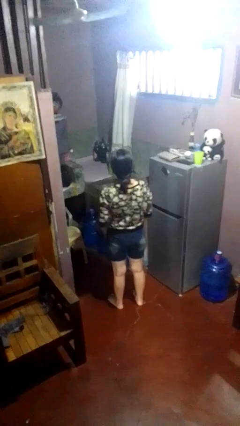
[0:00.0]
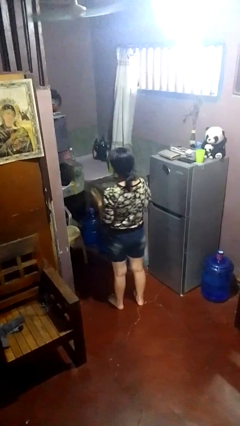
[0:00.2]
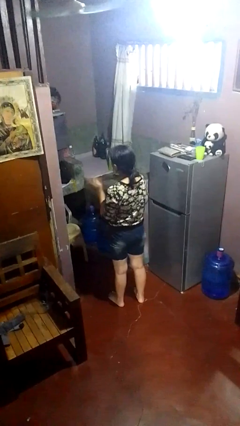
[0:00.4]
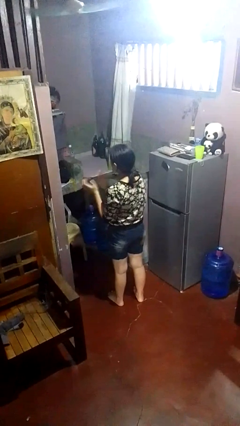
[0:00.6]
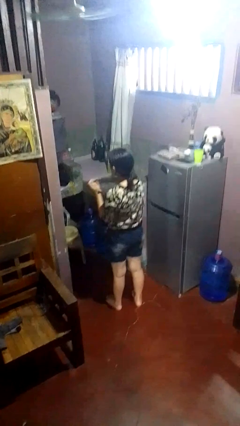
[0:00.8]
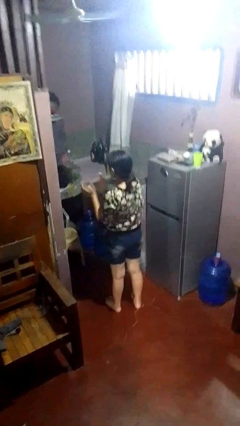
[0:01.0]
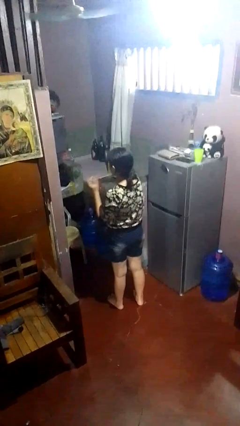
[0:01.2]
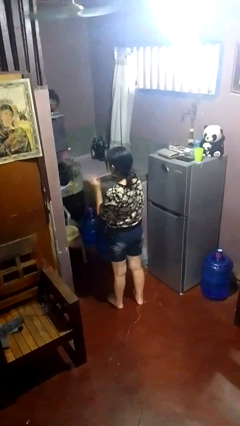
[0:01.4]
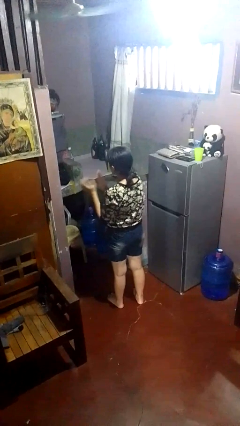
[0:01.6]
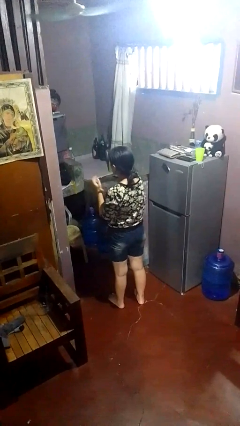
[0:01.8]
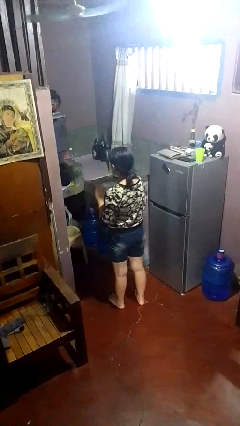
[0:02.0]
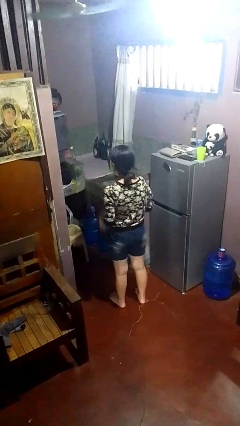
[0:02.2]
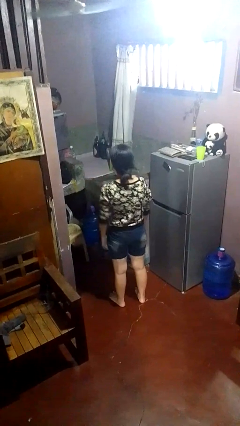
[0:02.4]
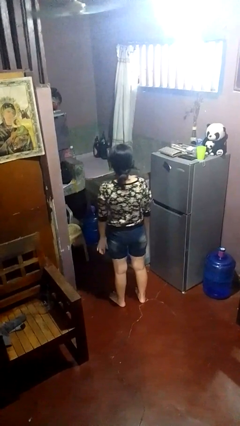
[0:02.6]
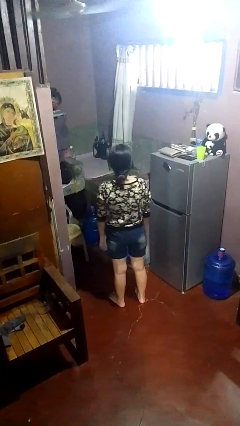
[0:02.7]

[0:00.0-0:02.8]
person claps hands

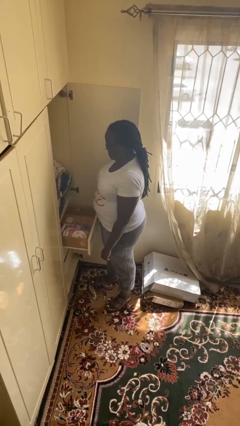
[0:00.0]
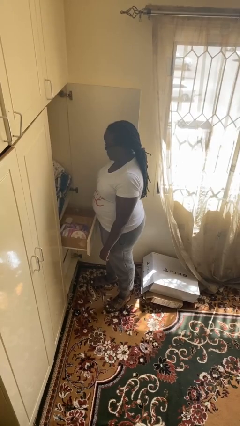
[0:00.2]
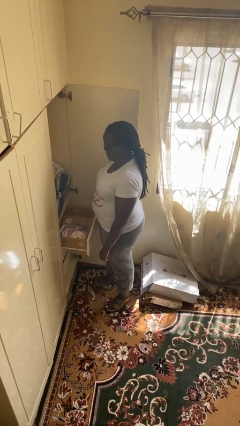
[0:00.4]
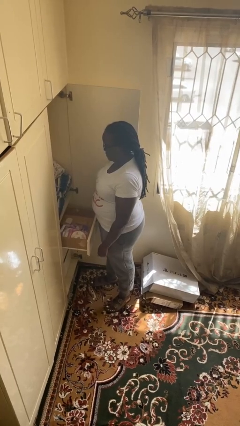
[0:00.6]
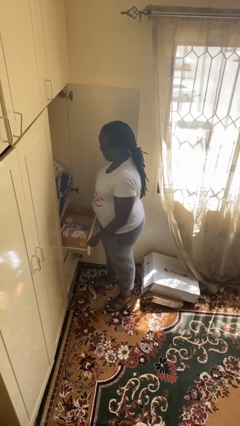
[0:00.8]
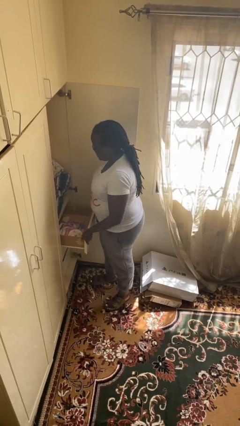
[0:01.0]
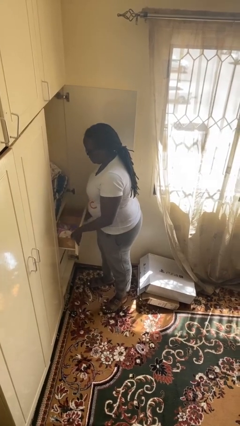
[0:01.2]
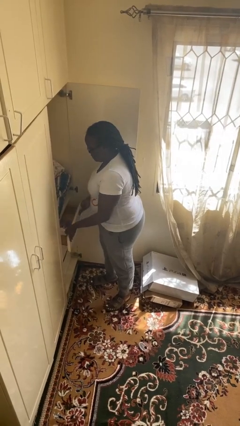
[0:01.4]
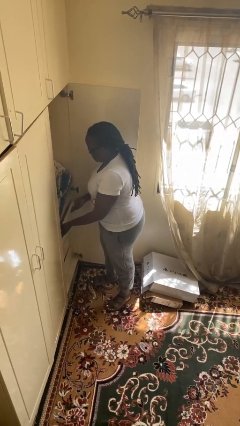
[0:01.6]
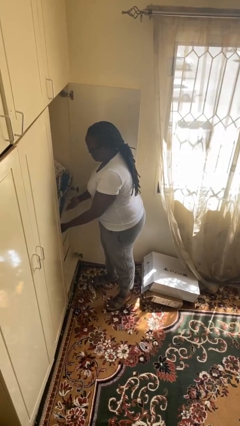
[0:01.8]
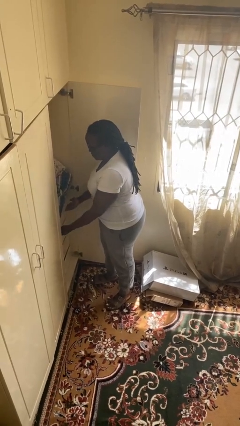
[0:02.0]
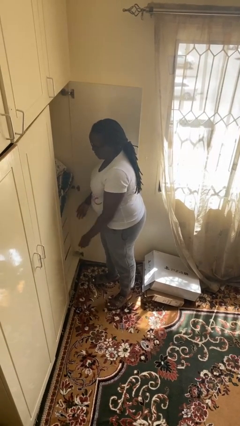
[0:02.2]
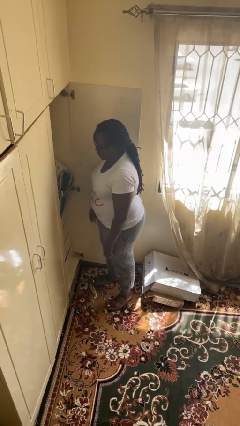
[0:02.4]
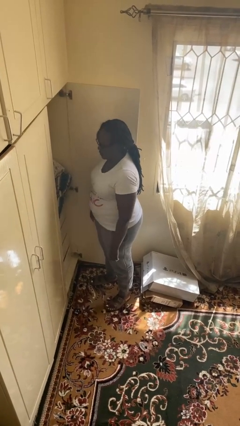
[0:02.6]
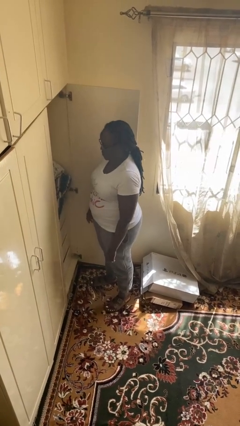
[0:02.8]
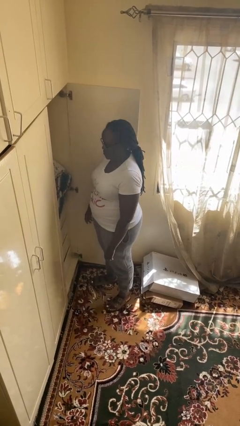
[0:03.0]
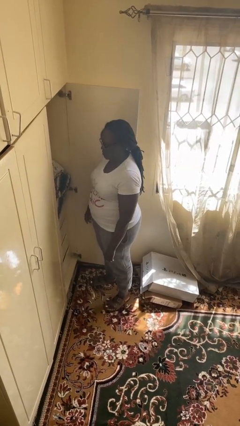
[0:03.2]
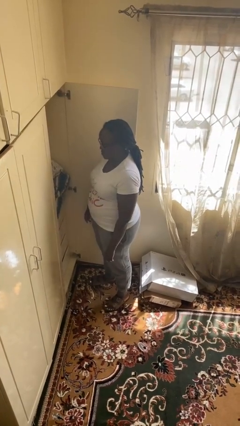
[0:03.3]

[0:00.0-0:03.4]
person closes dresser drawer

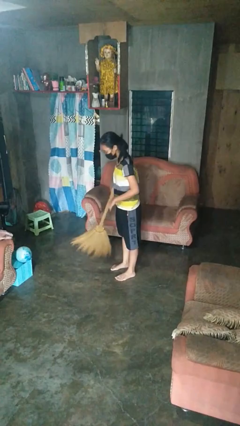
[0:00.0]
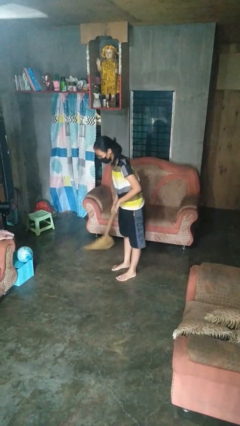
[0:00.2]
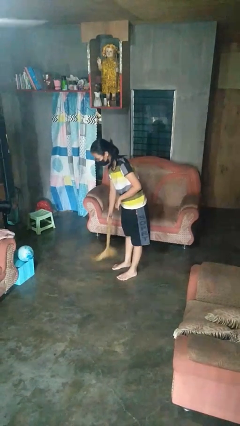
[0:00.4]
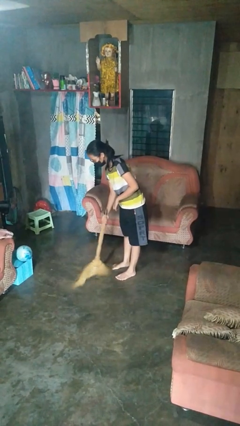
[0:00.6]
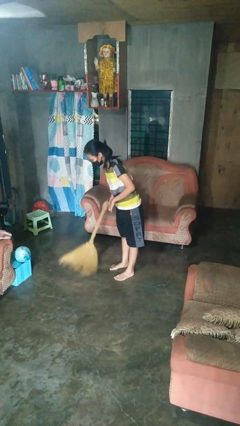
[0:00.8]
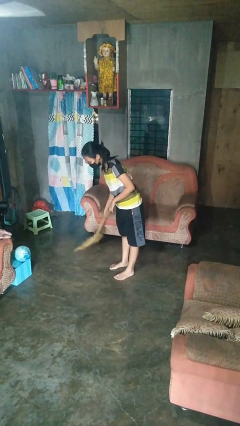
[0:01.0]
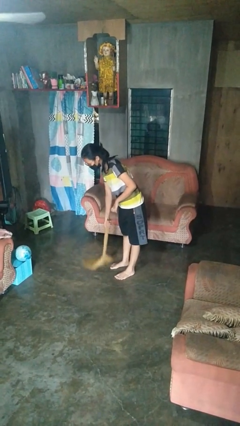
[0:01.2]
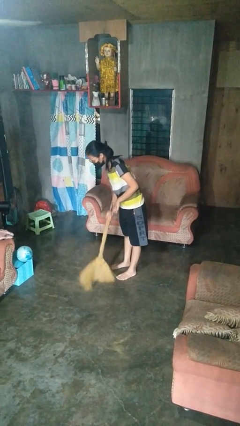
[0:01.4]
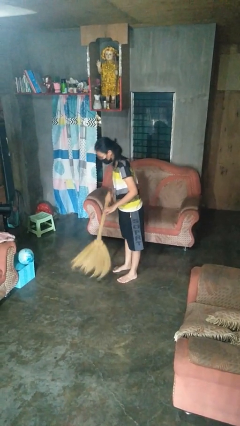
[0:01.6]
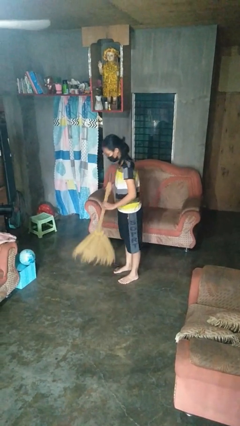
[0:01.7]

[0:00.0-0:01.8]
person sweeps floor

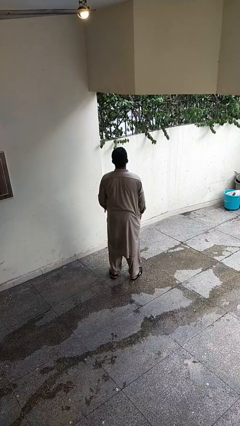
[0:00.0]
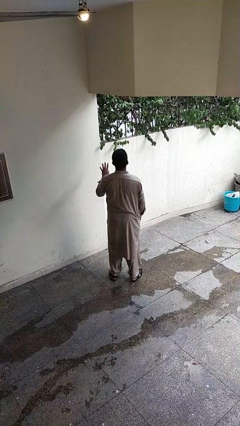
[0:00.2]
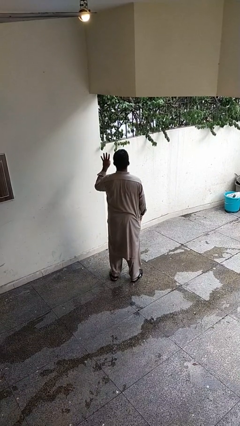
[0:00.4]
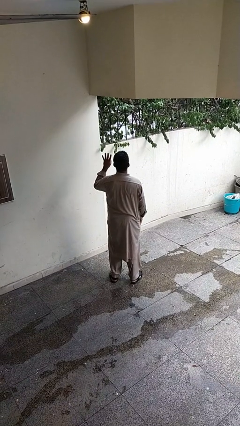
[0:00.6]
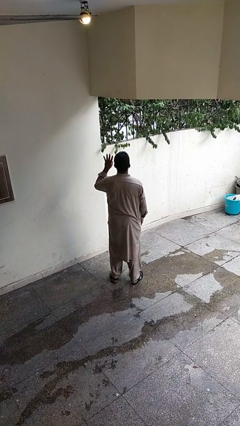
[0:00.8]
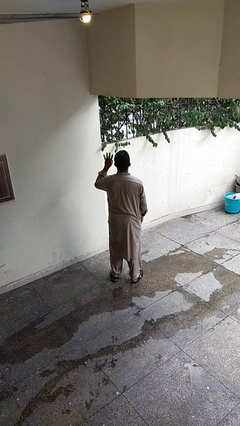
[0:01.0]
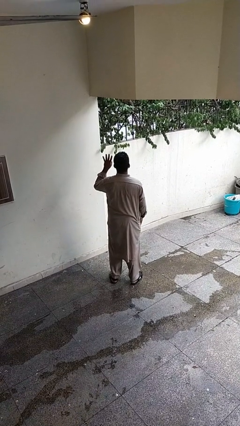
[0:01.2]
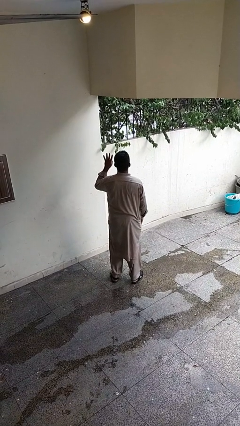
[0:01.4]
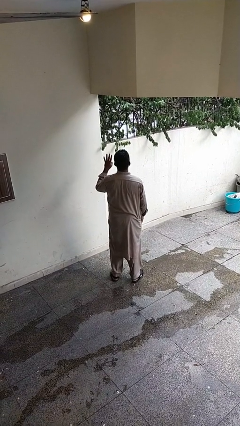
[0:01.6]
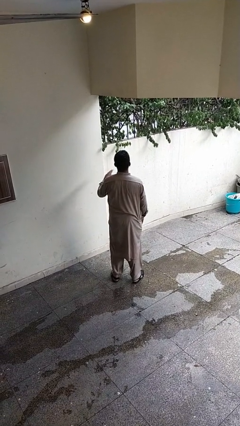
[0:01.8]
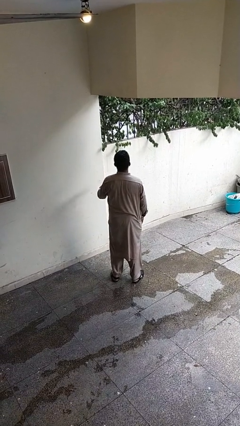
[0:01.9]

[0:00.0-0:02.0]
person gestures number four

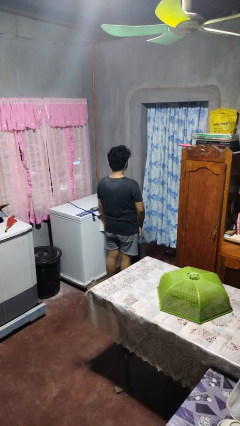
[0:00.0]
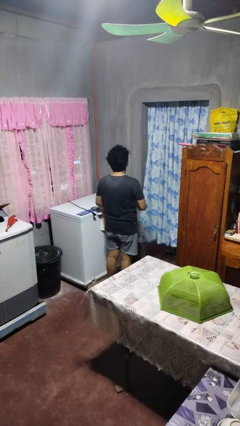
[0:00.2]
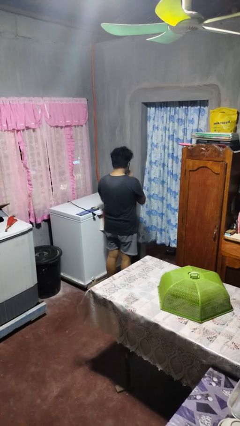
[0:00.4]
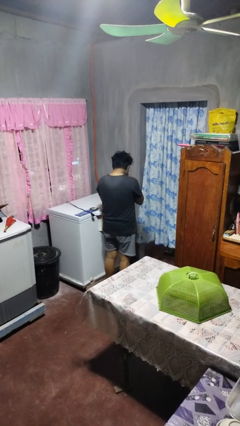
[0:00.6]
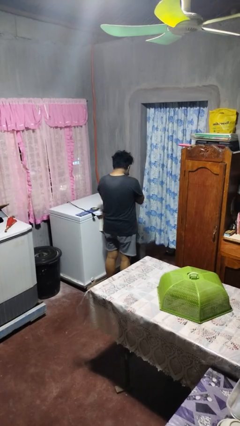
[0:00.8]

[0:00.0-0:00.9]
person sneezes into hand

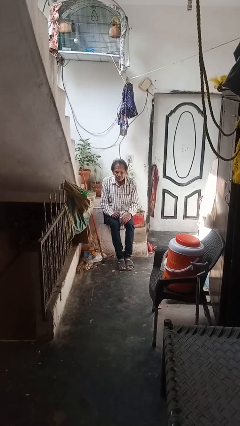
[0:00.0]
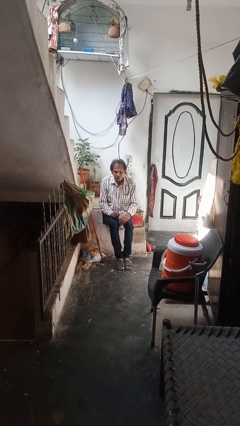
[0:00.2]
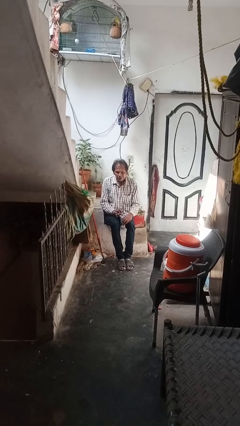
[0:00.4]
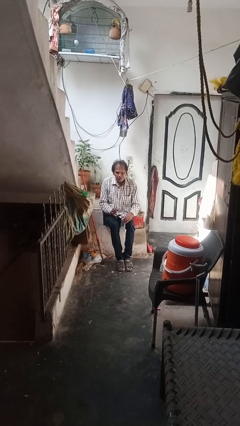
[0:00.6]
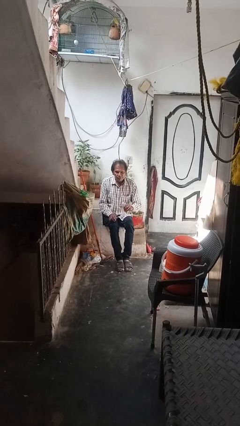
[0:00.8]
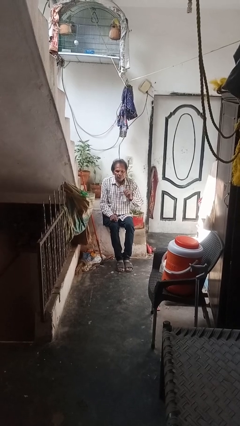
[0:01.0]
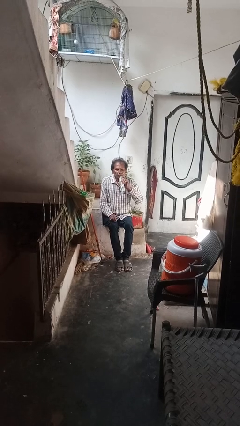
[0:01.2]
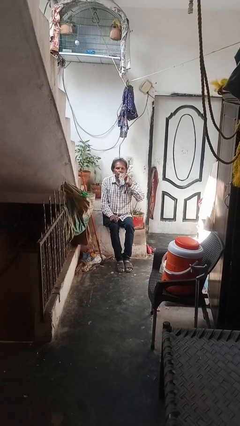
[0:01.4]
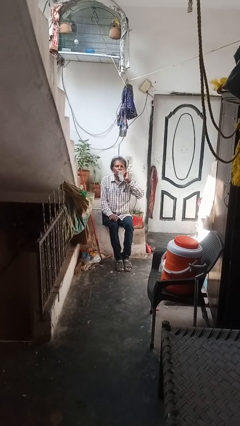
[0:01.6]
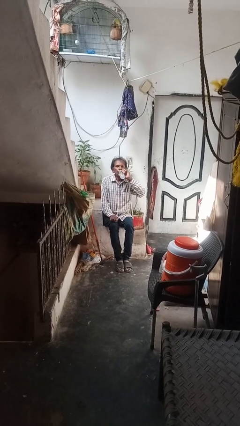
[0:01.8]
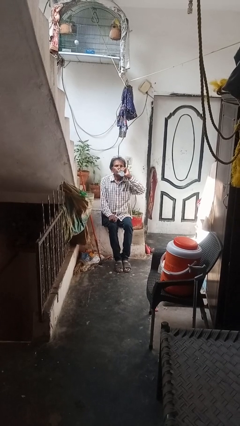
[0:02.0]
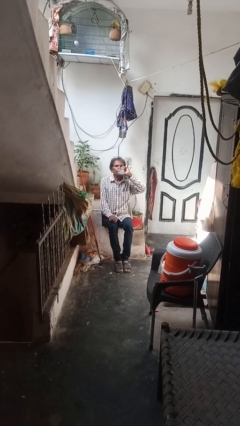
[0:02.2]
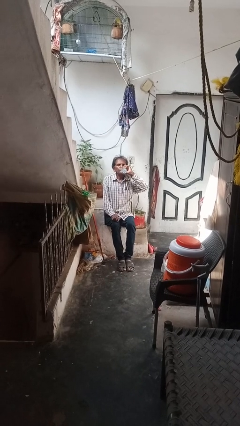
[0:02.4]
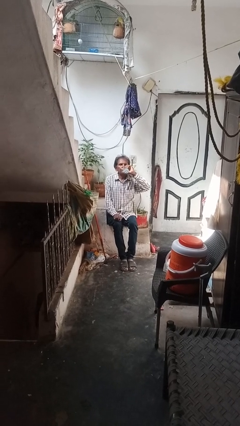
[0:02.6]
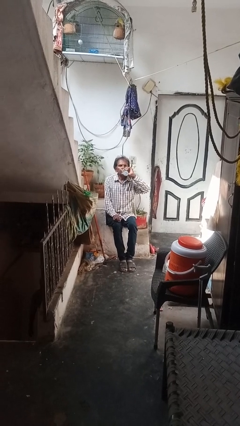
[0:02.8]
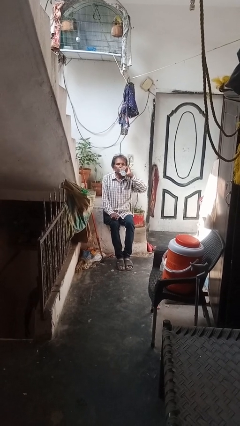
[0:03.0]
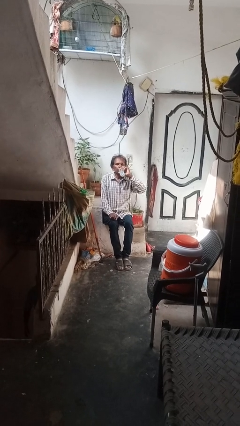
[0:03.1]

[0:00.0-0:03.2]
person drinks from bottle

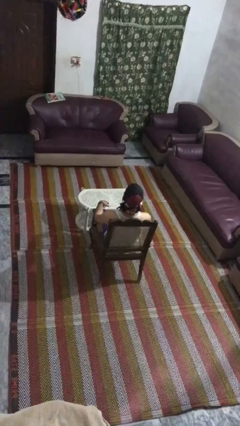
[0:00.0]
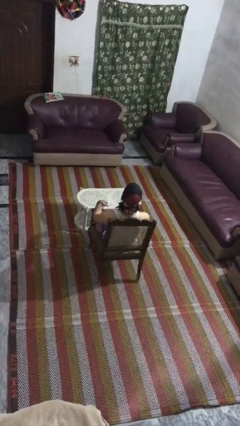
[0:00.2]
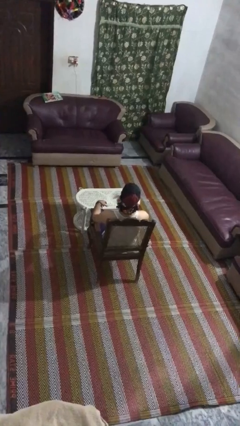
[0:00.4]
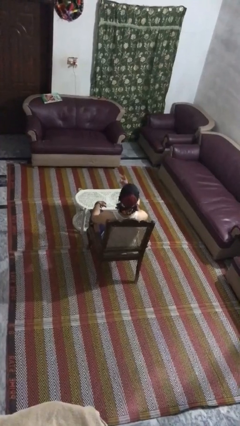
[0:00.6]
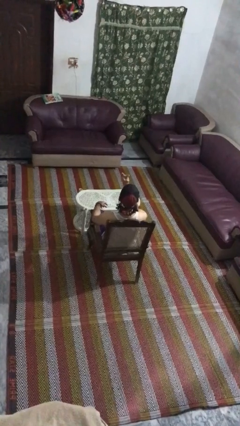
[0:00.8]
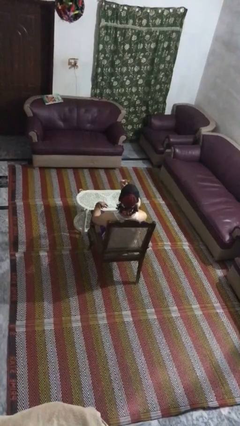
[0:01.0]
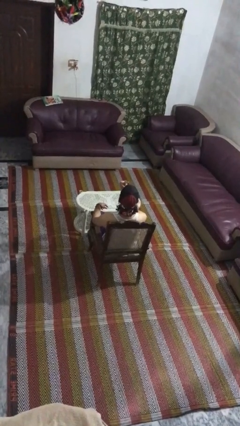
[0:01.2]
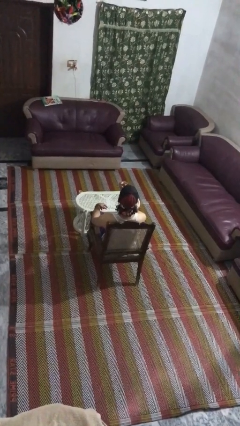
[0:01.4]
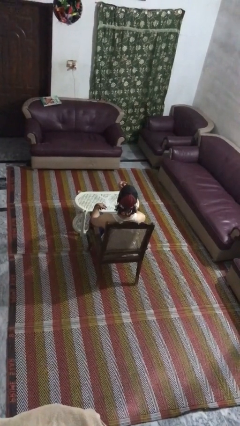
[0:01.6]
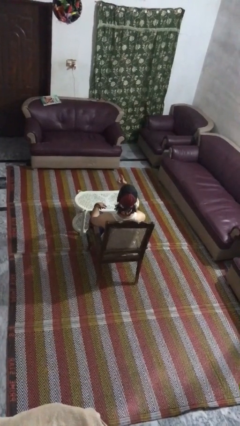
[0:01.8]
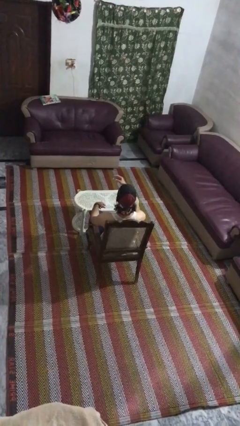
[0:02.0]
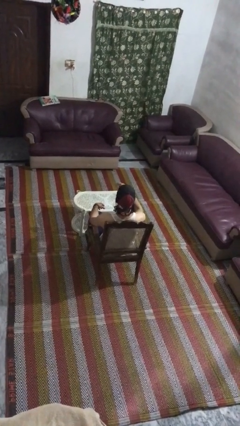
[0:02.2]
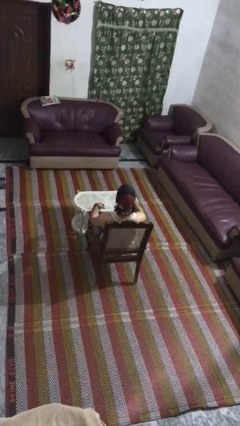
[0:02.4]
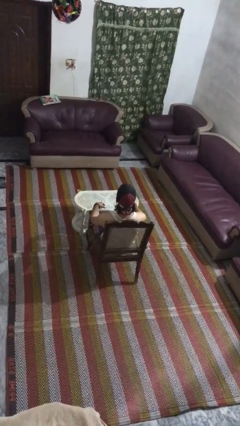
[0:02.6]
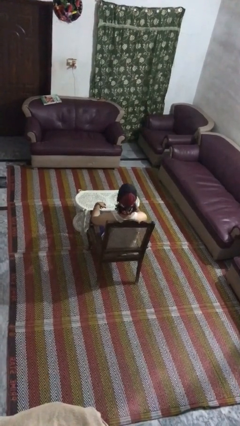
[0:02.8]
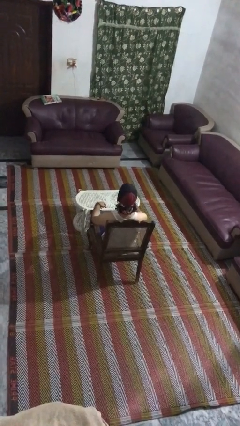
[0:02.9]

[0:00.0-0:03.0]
person gestures watch closely
